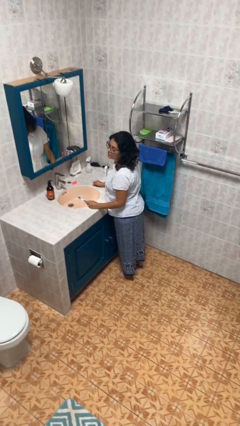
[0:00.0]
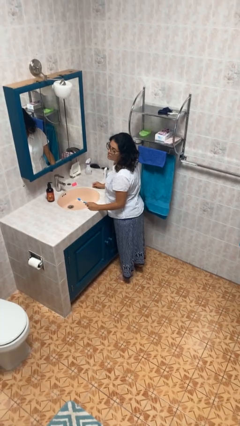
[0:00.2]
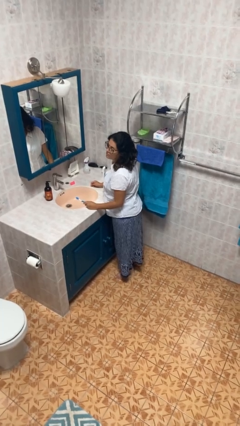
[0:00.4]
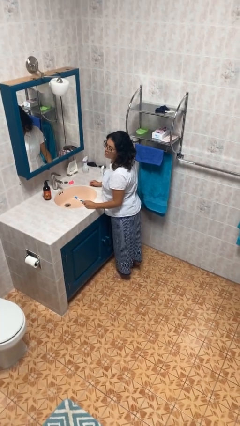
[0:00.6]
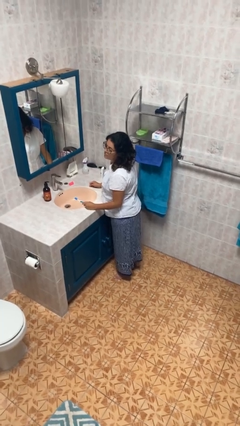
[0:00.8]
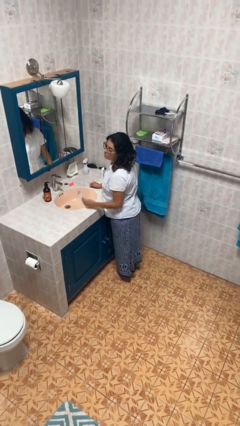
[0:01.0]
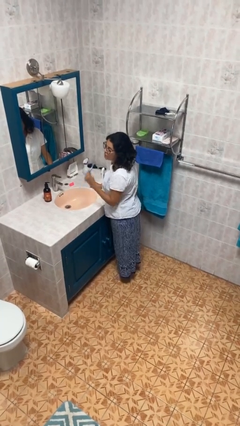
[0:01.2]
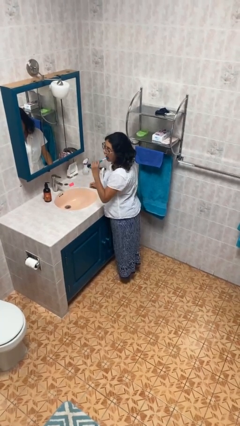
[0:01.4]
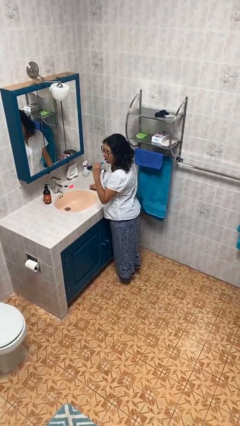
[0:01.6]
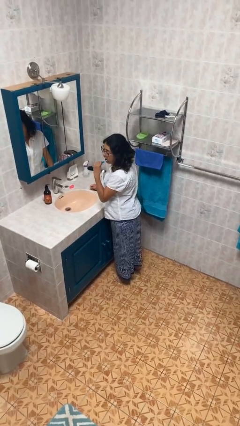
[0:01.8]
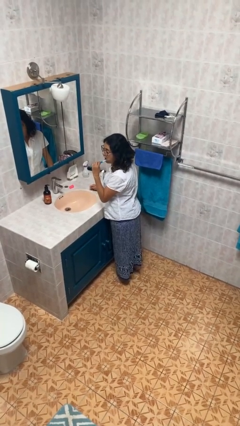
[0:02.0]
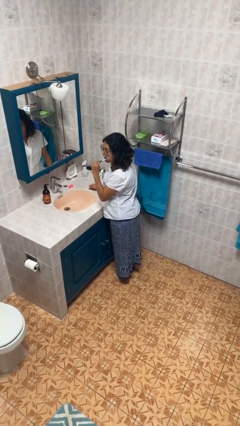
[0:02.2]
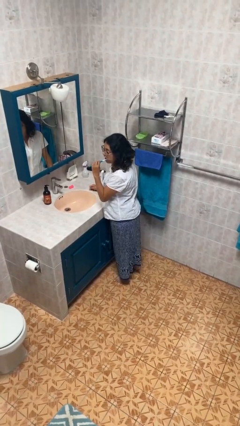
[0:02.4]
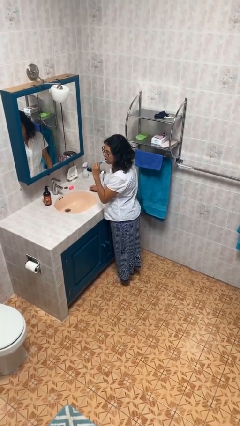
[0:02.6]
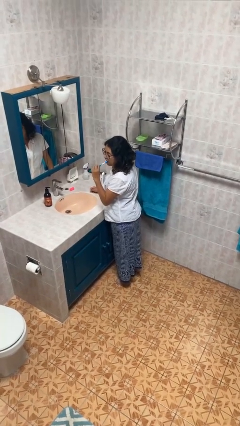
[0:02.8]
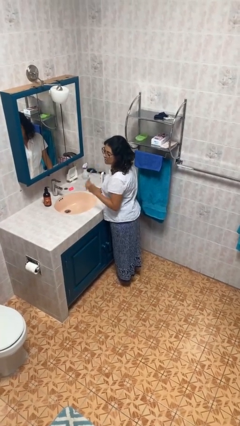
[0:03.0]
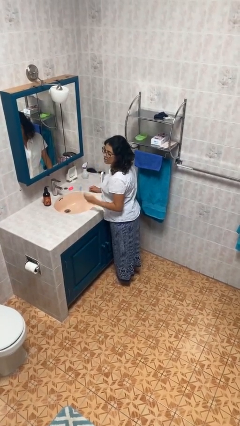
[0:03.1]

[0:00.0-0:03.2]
person brushes teeth

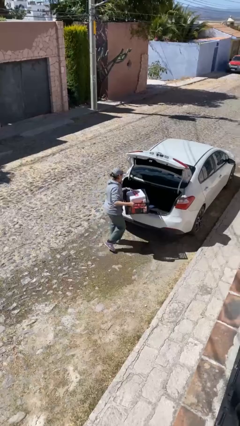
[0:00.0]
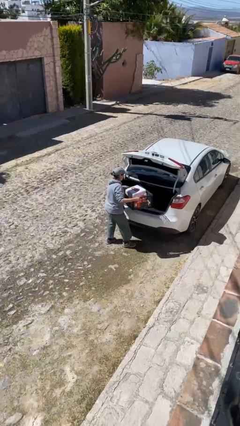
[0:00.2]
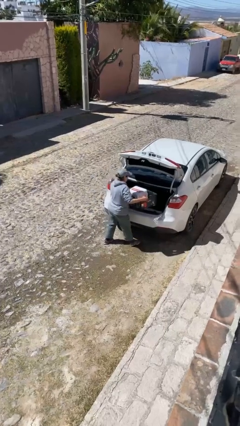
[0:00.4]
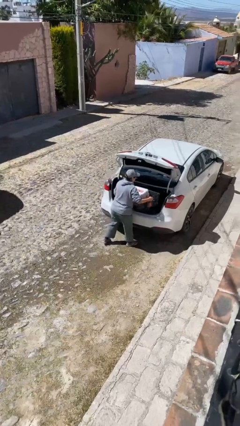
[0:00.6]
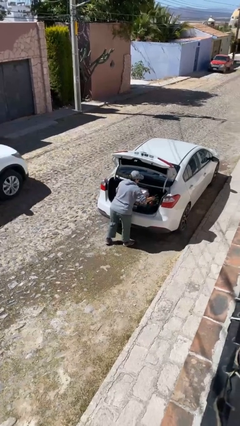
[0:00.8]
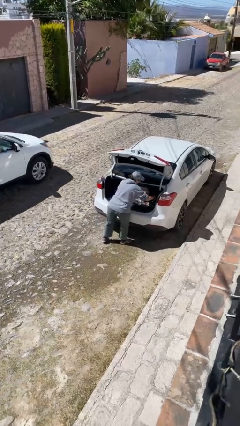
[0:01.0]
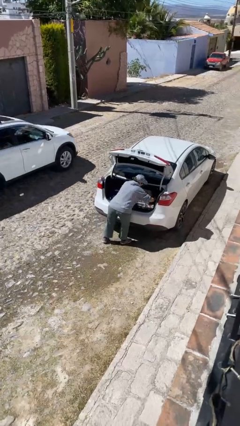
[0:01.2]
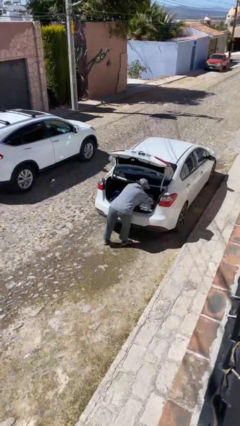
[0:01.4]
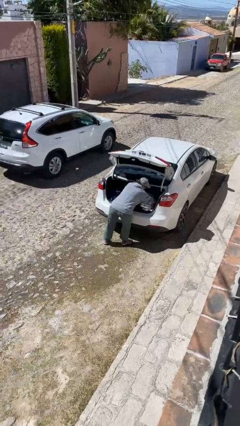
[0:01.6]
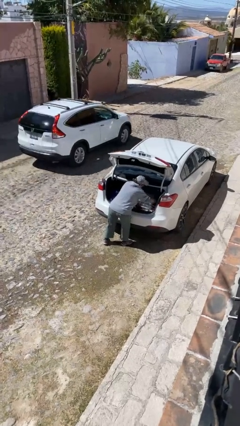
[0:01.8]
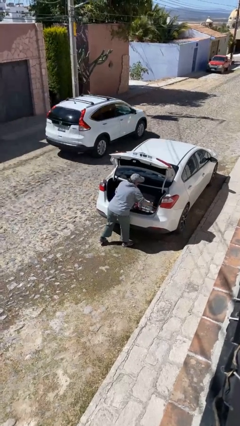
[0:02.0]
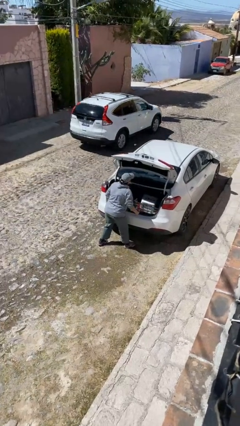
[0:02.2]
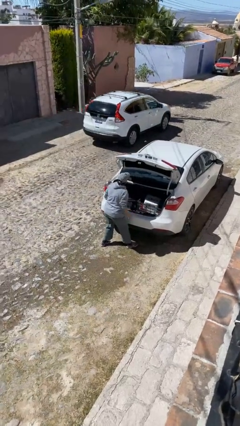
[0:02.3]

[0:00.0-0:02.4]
person loads car

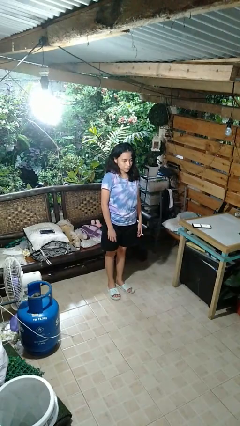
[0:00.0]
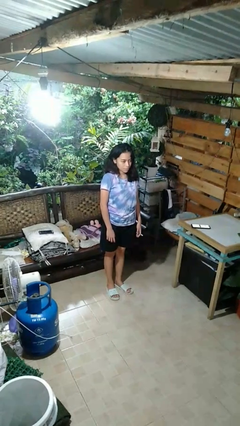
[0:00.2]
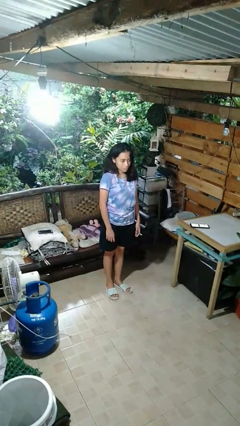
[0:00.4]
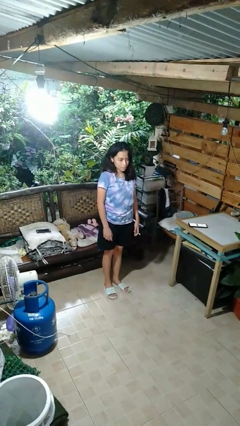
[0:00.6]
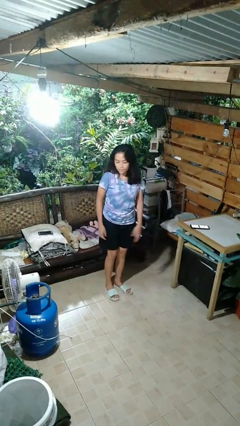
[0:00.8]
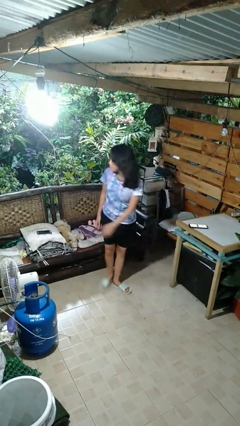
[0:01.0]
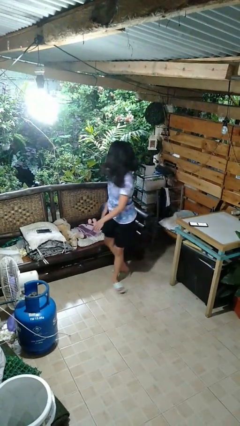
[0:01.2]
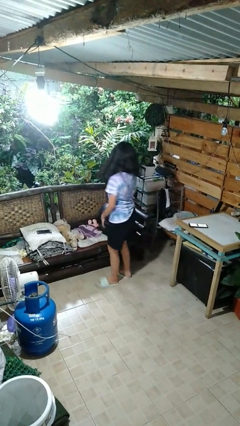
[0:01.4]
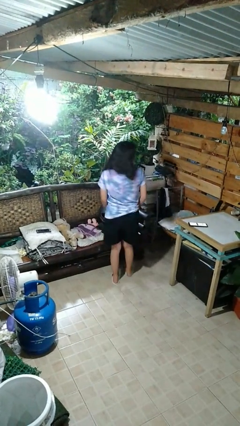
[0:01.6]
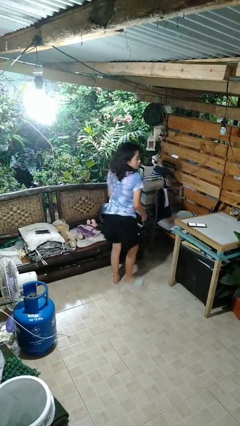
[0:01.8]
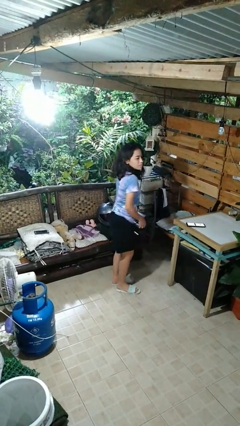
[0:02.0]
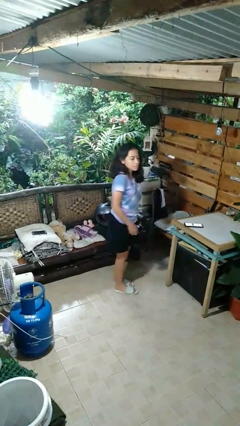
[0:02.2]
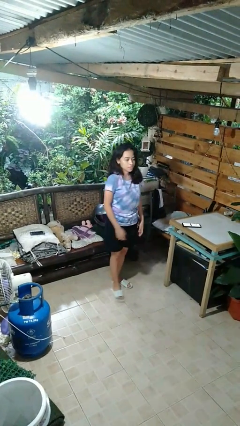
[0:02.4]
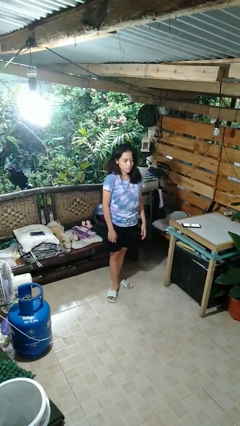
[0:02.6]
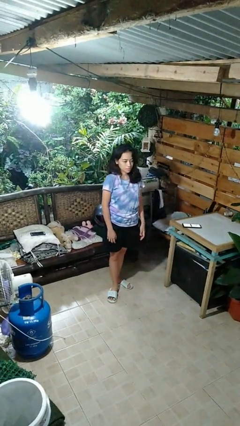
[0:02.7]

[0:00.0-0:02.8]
person twirls

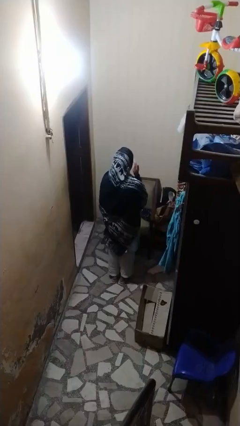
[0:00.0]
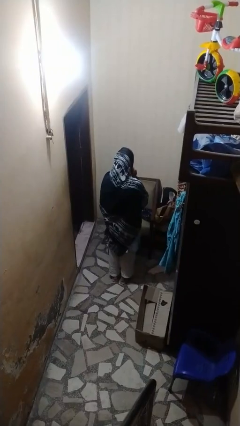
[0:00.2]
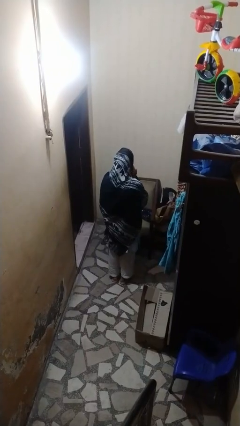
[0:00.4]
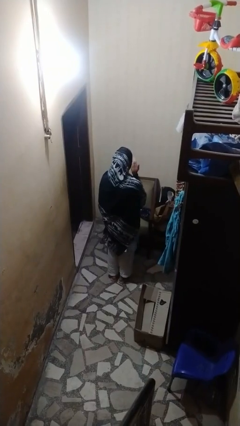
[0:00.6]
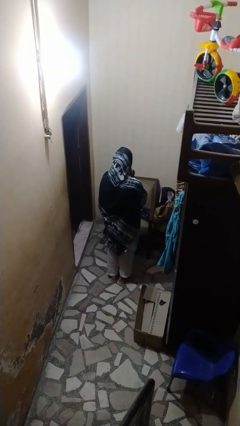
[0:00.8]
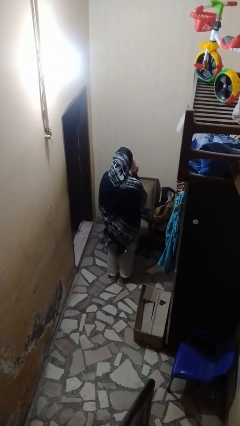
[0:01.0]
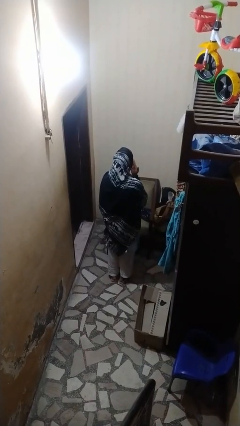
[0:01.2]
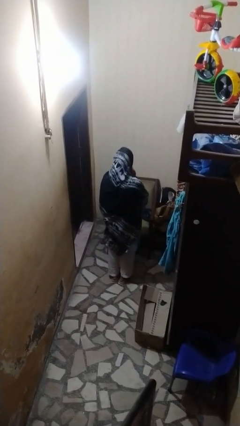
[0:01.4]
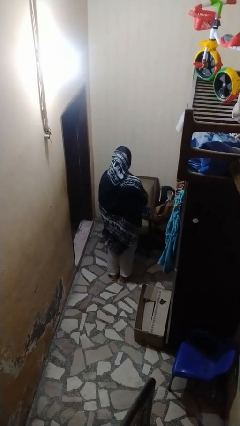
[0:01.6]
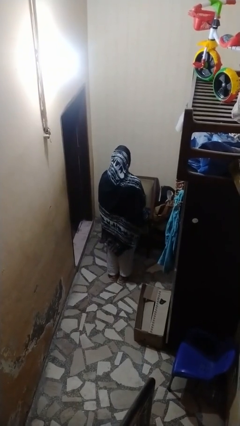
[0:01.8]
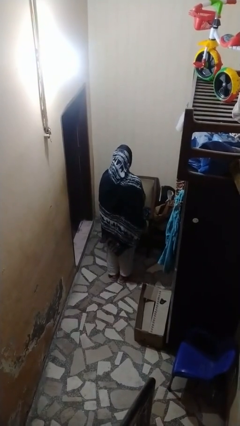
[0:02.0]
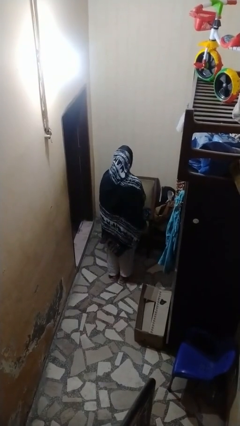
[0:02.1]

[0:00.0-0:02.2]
person gestures blow kiss

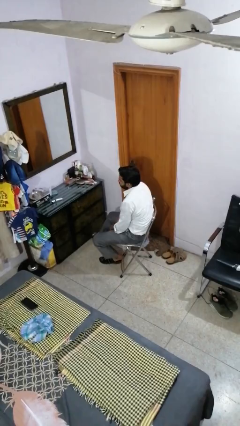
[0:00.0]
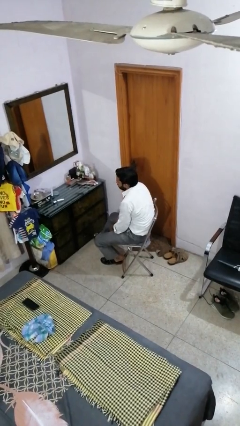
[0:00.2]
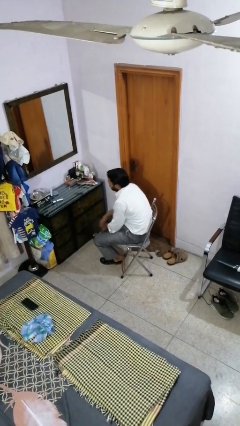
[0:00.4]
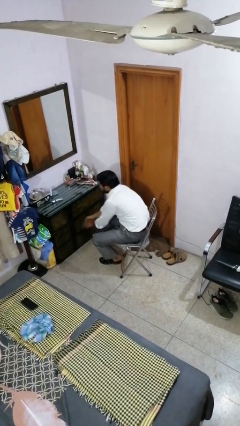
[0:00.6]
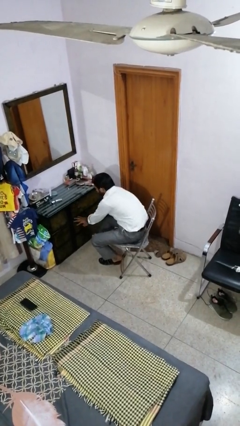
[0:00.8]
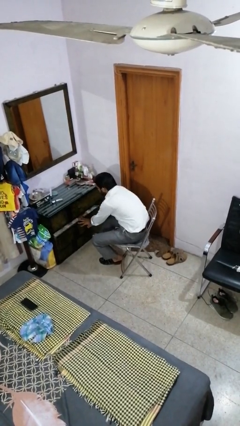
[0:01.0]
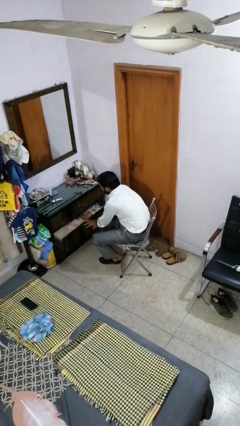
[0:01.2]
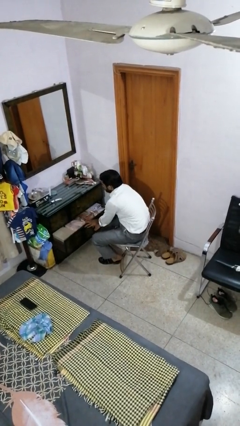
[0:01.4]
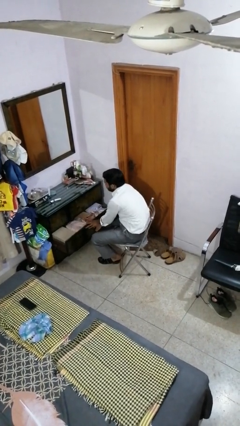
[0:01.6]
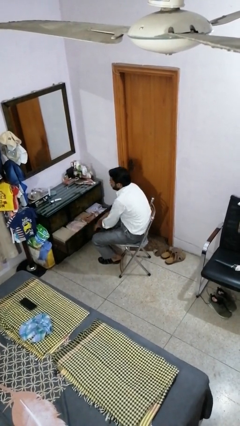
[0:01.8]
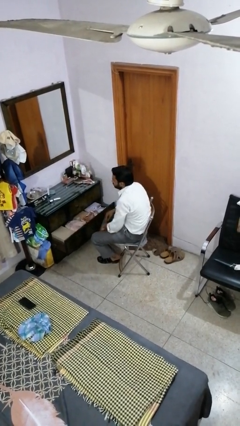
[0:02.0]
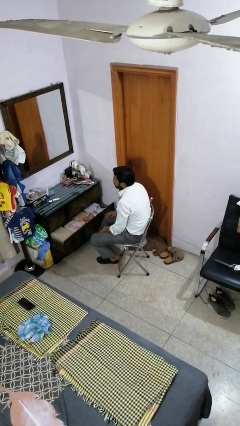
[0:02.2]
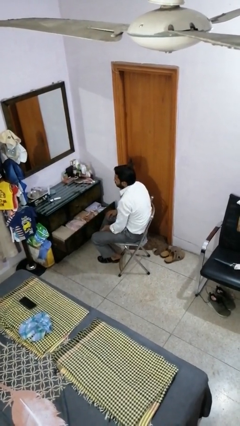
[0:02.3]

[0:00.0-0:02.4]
person opens dresser drawer

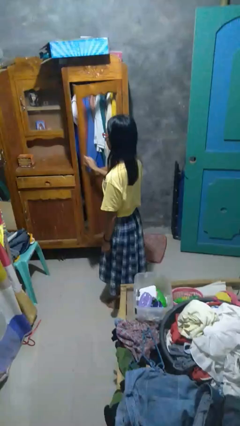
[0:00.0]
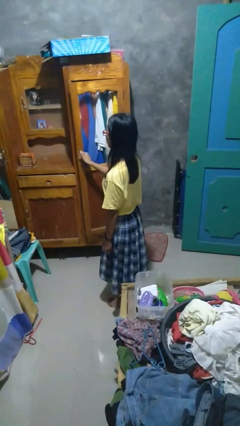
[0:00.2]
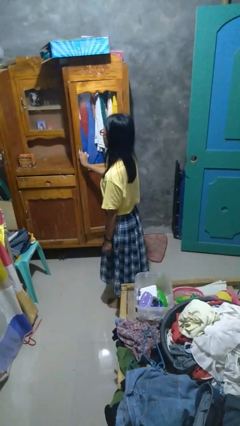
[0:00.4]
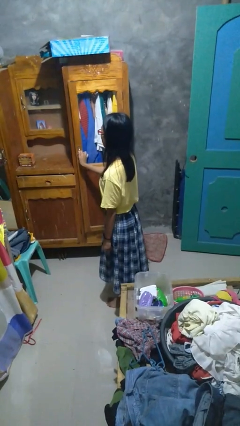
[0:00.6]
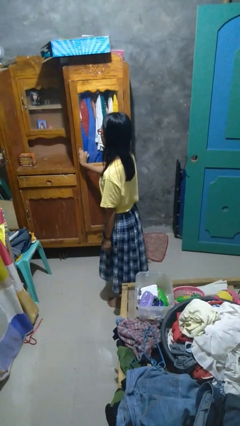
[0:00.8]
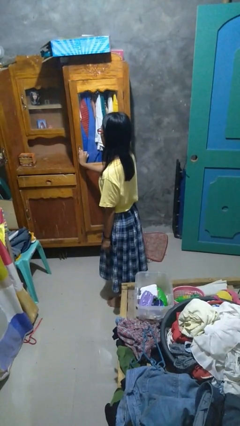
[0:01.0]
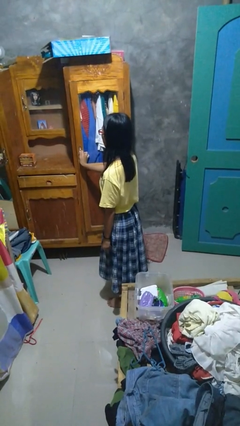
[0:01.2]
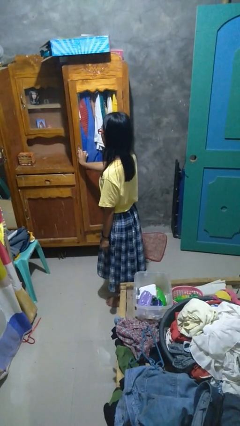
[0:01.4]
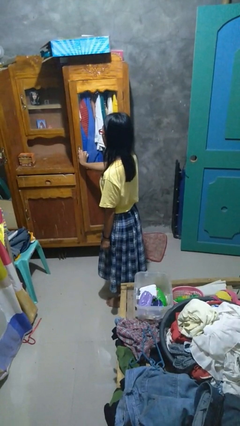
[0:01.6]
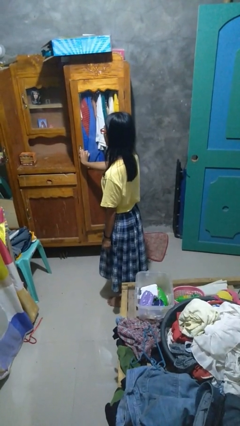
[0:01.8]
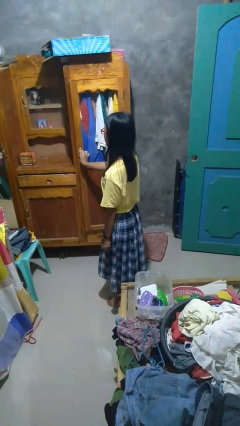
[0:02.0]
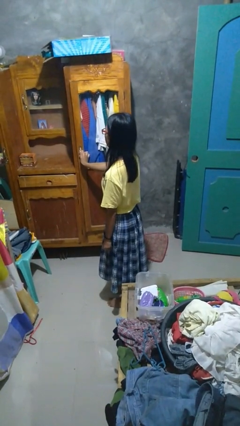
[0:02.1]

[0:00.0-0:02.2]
person closes closet door

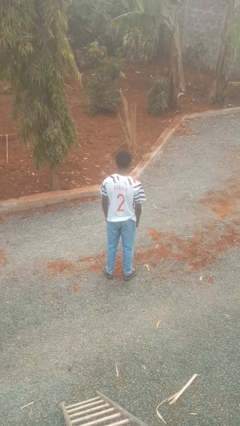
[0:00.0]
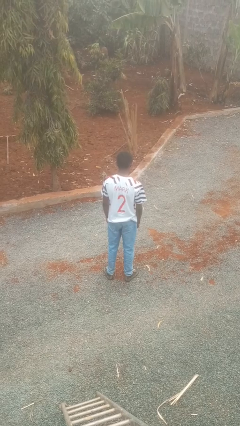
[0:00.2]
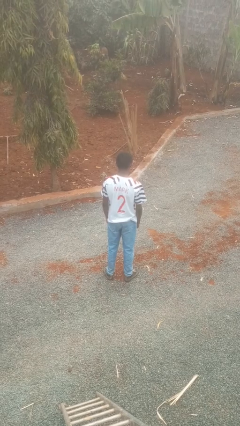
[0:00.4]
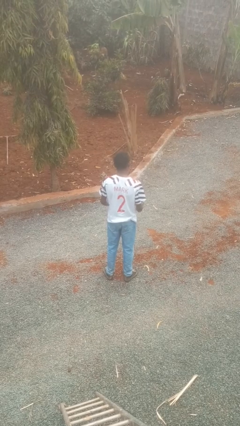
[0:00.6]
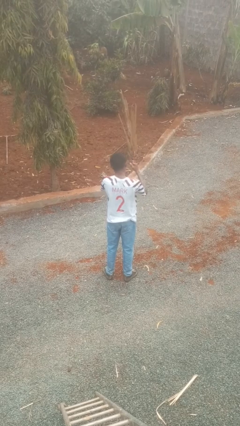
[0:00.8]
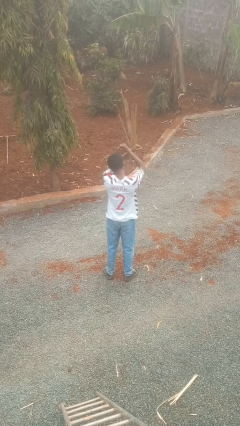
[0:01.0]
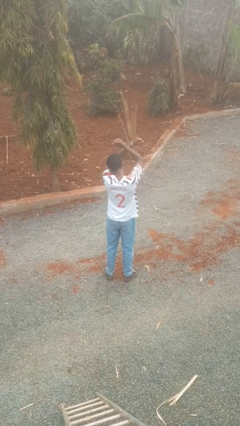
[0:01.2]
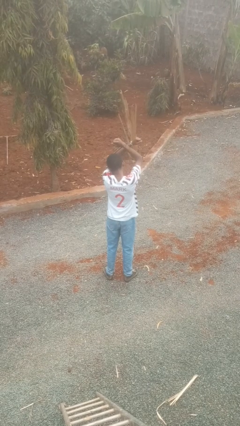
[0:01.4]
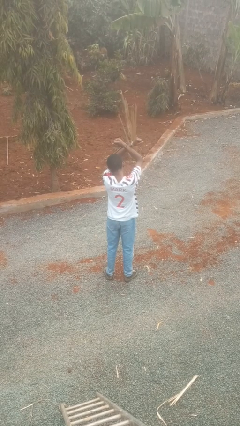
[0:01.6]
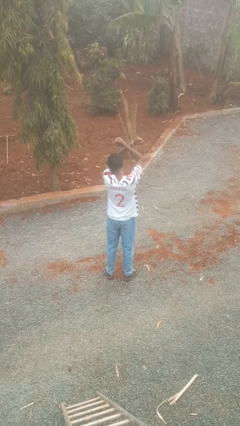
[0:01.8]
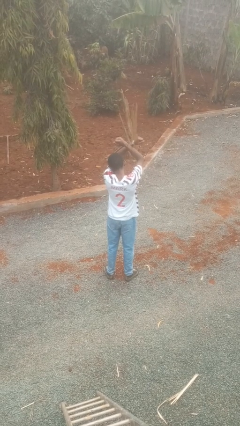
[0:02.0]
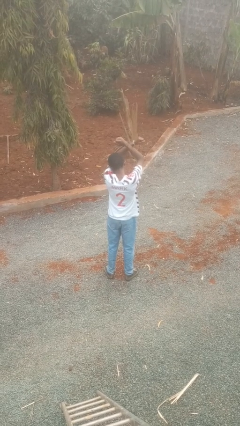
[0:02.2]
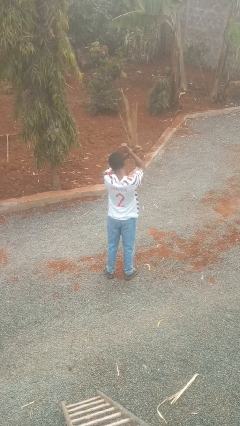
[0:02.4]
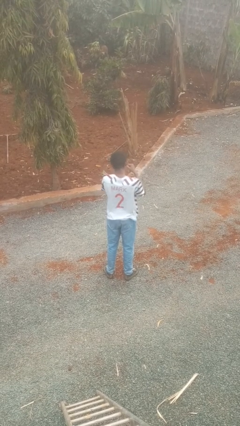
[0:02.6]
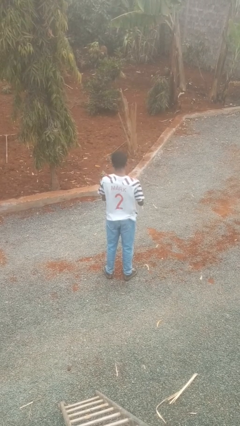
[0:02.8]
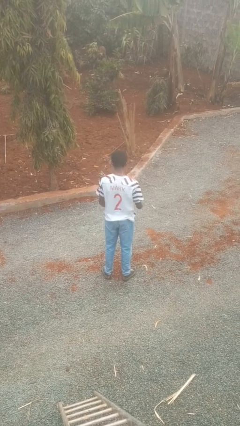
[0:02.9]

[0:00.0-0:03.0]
person gestures arms x
